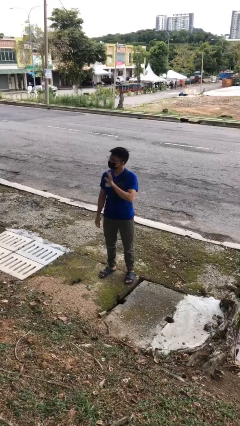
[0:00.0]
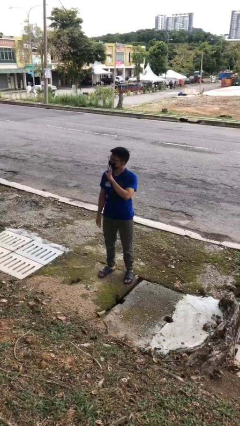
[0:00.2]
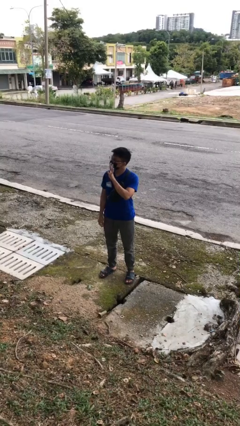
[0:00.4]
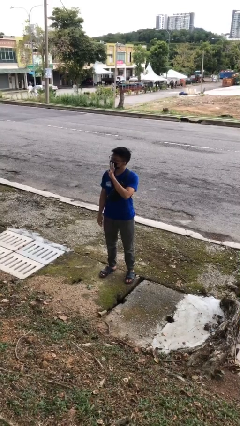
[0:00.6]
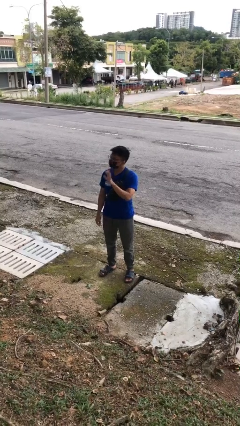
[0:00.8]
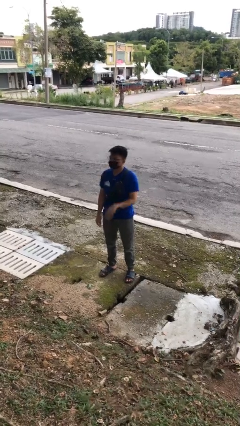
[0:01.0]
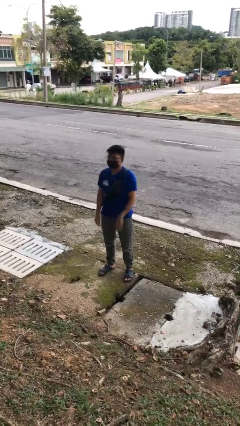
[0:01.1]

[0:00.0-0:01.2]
person gestures number five

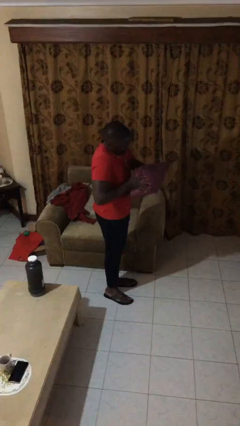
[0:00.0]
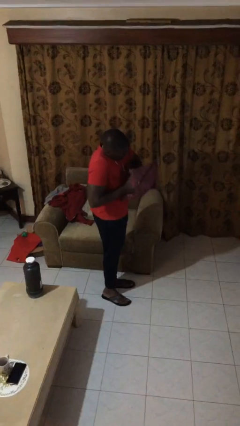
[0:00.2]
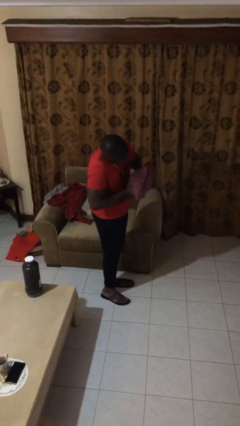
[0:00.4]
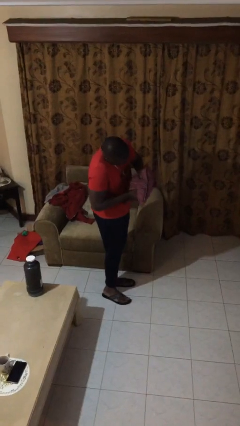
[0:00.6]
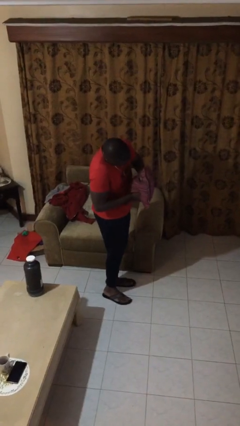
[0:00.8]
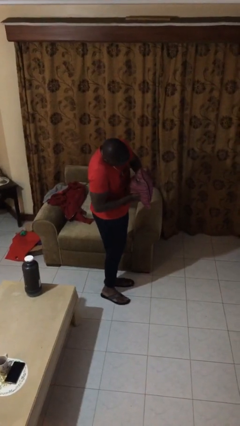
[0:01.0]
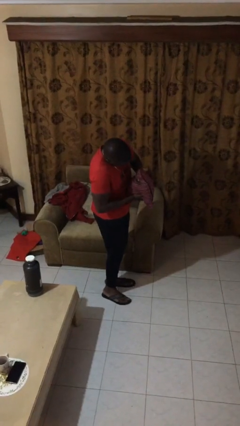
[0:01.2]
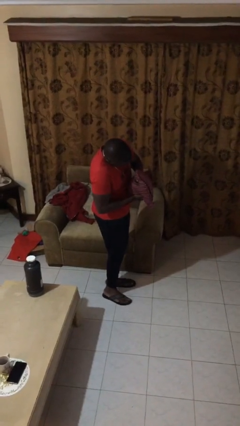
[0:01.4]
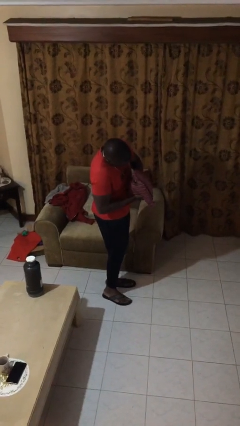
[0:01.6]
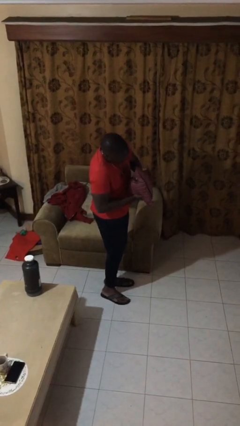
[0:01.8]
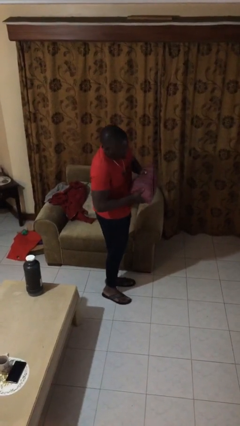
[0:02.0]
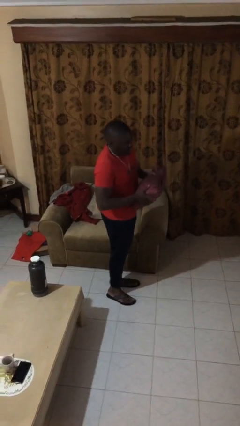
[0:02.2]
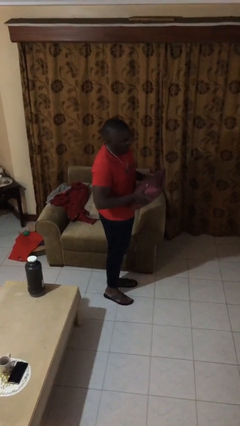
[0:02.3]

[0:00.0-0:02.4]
person squeezes object

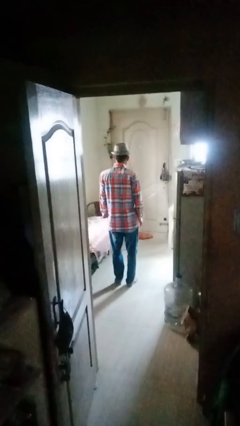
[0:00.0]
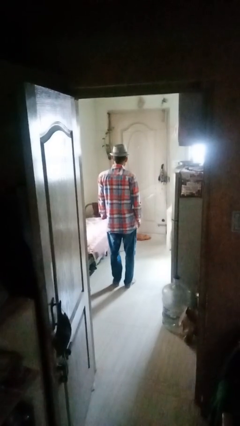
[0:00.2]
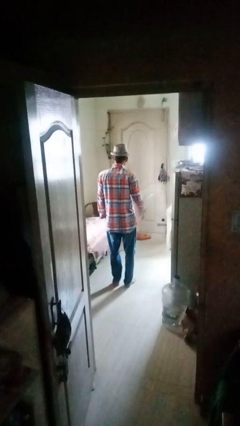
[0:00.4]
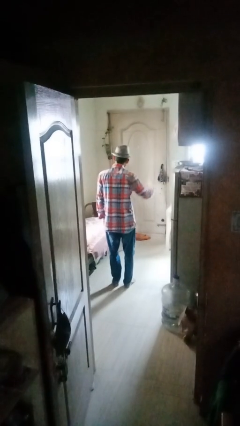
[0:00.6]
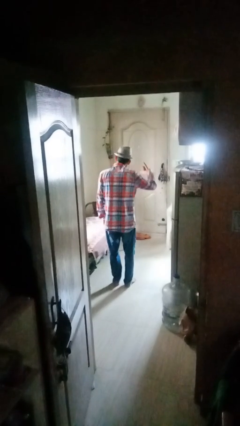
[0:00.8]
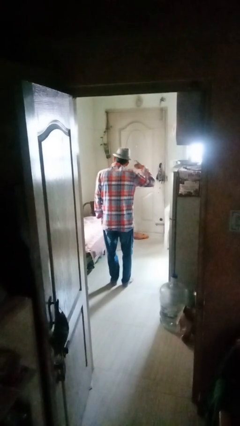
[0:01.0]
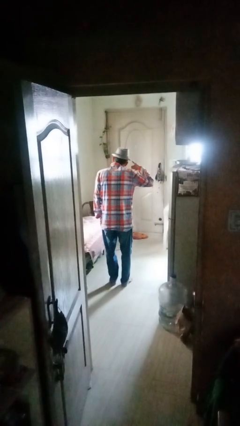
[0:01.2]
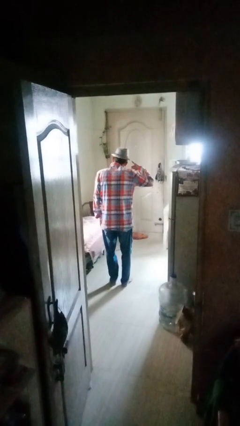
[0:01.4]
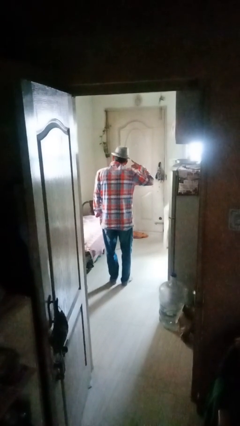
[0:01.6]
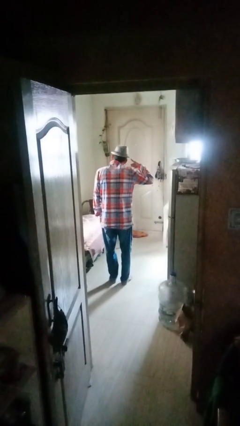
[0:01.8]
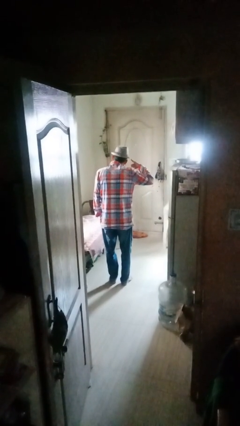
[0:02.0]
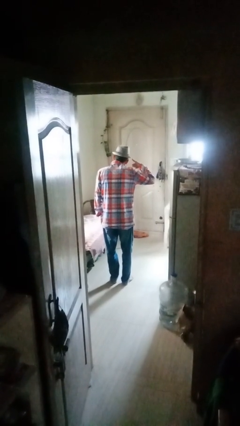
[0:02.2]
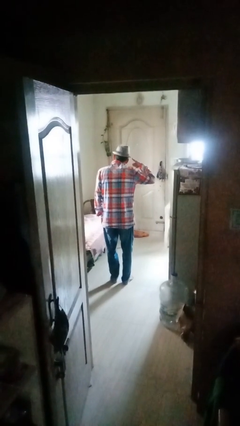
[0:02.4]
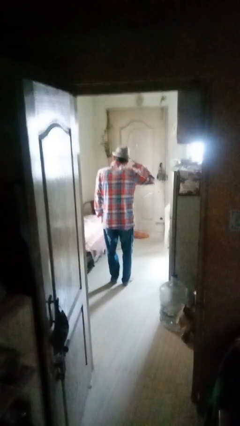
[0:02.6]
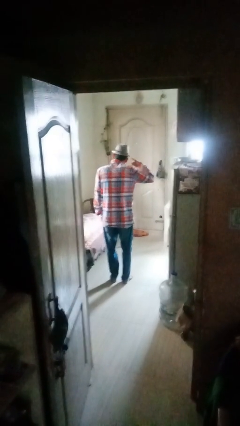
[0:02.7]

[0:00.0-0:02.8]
person gestures call me

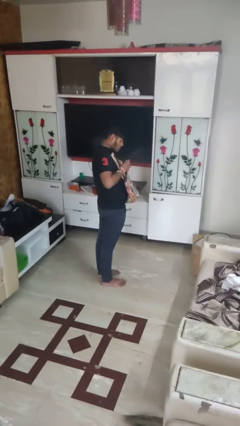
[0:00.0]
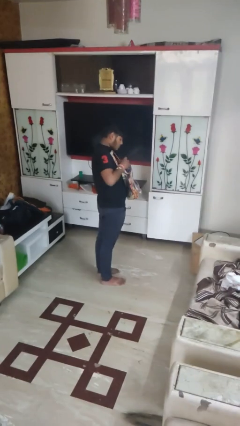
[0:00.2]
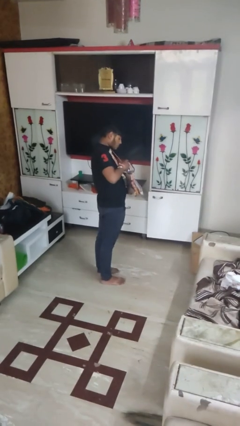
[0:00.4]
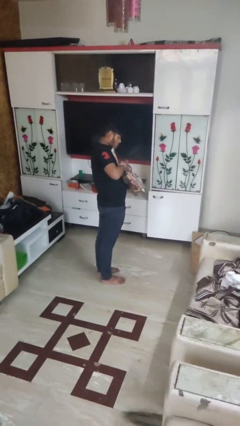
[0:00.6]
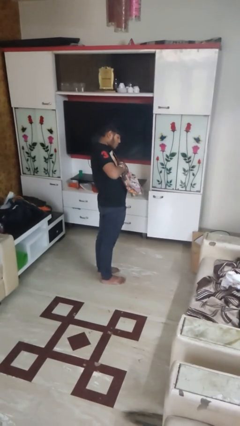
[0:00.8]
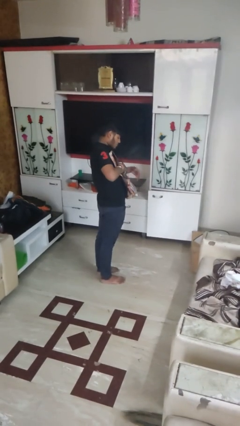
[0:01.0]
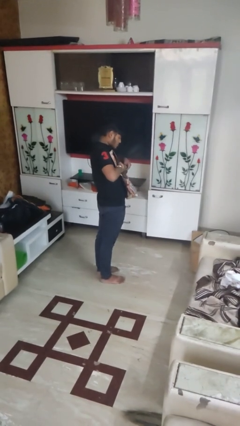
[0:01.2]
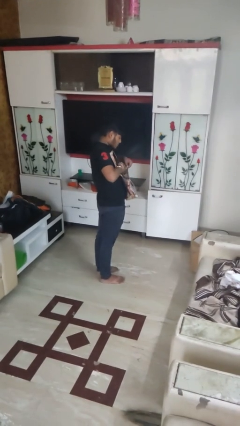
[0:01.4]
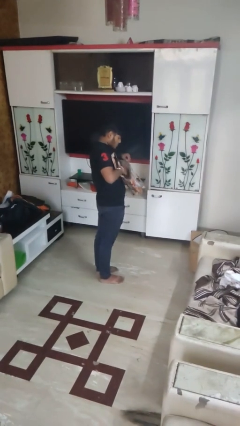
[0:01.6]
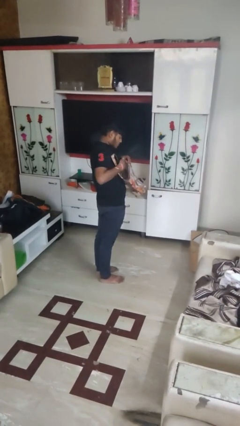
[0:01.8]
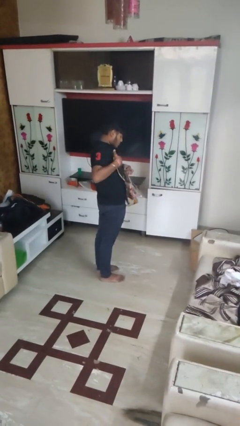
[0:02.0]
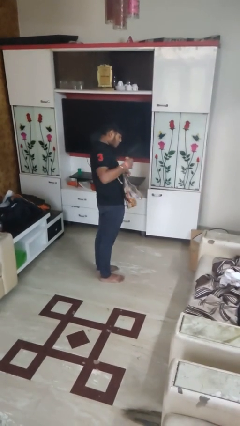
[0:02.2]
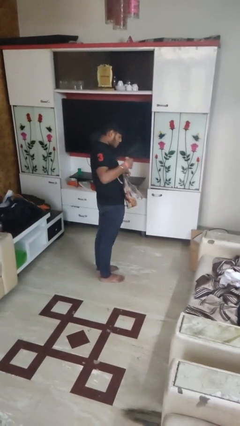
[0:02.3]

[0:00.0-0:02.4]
person puts object into purse

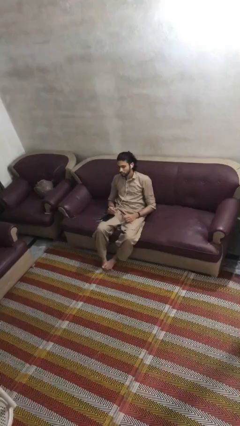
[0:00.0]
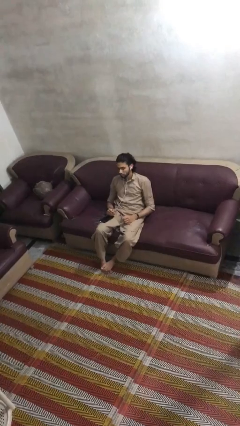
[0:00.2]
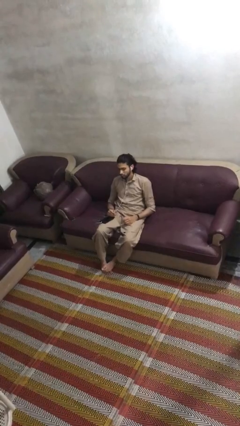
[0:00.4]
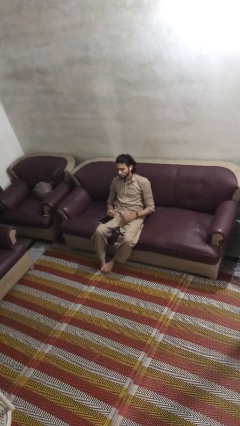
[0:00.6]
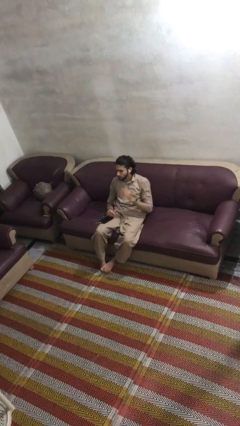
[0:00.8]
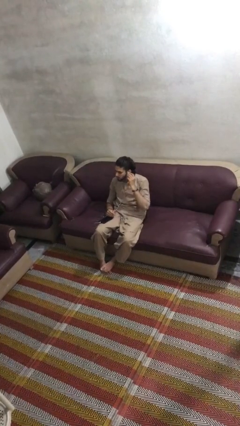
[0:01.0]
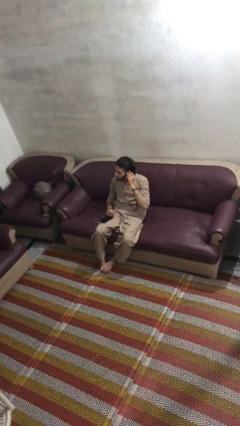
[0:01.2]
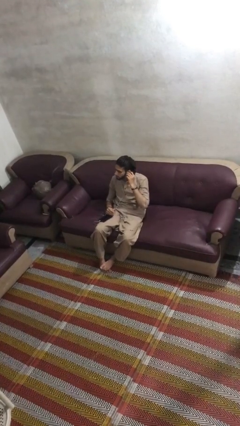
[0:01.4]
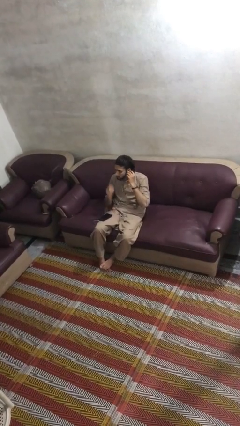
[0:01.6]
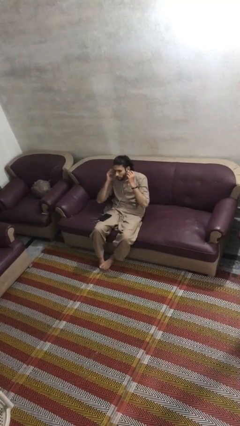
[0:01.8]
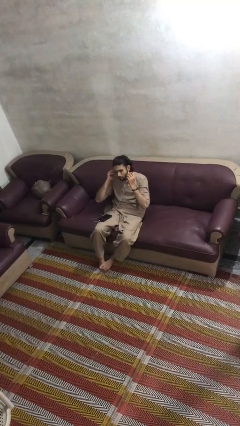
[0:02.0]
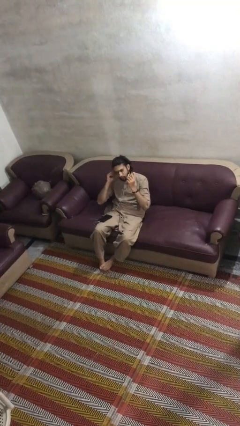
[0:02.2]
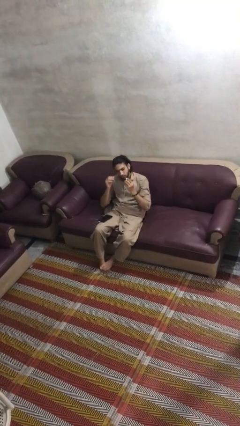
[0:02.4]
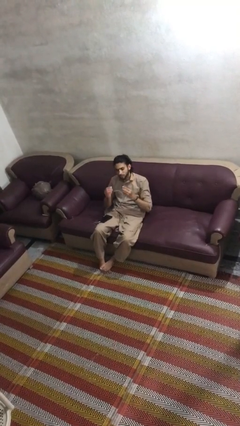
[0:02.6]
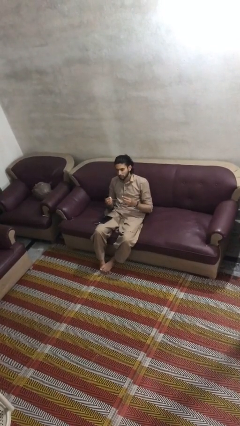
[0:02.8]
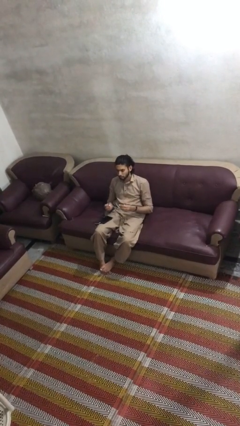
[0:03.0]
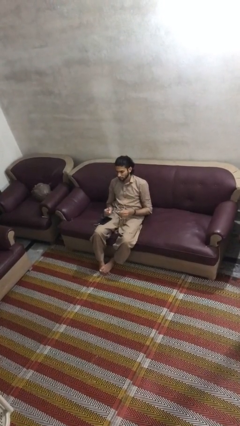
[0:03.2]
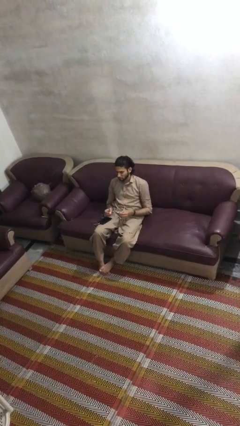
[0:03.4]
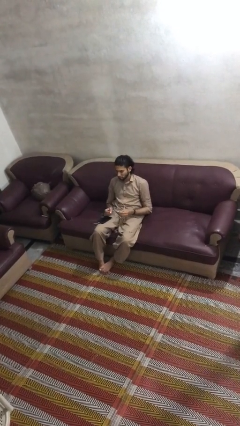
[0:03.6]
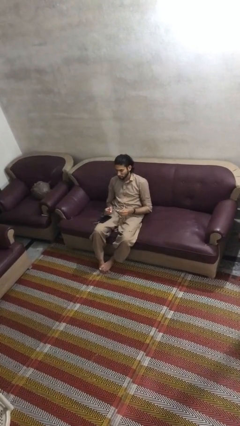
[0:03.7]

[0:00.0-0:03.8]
person takes off headphones

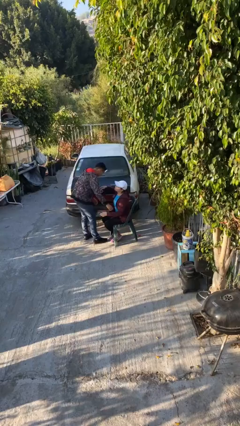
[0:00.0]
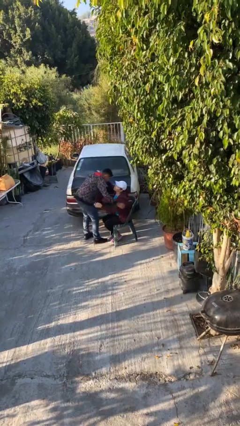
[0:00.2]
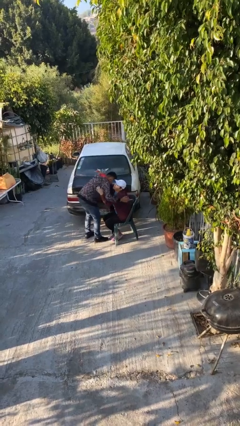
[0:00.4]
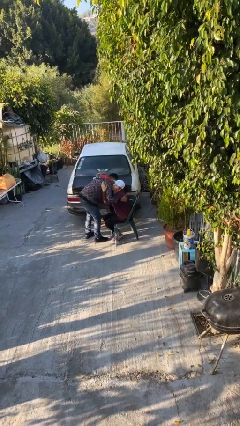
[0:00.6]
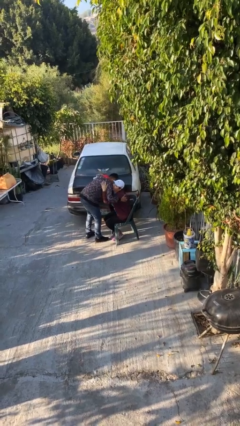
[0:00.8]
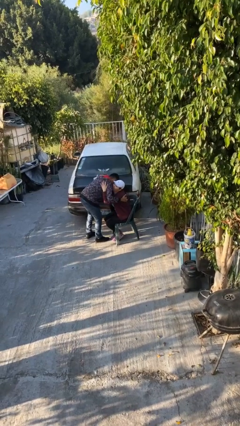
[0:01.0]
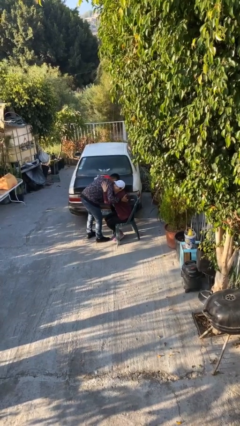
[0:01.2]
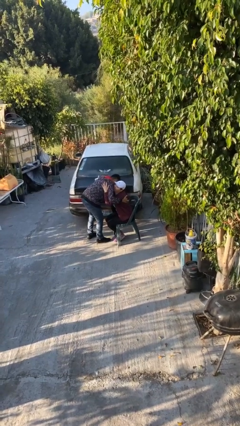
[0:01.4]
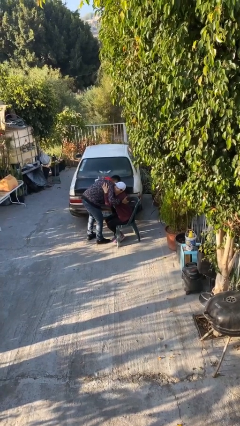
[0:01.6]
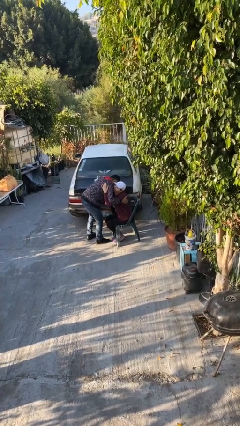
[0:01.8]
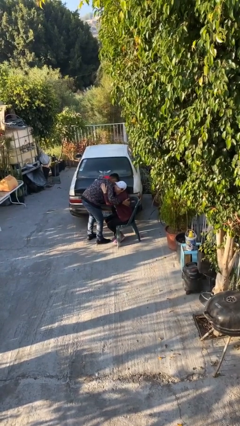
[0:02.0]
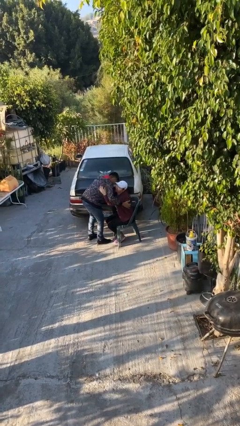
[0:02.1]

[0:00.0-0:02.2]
person embraces person

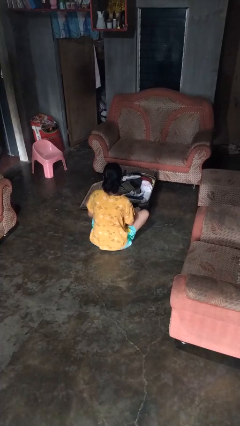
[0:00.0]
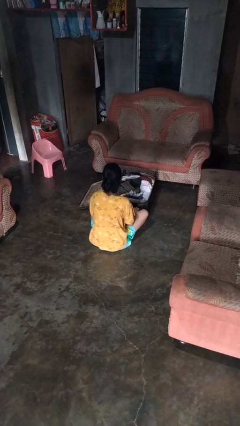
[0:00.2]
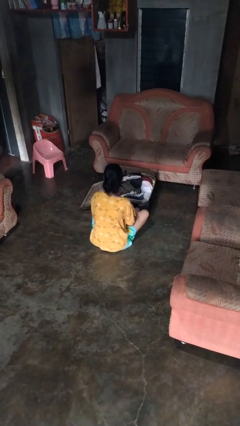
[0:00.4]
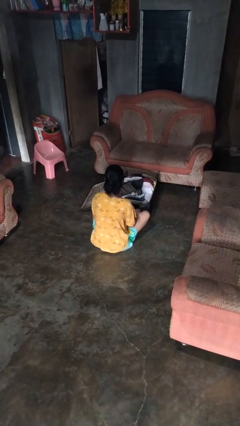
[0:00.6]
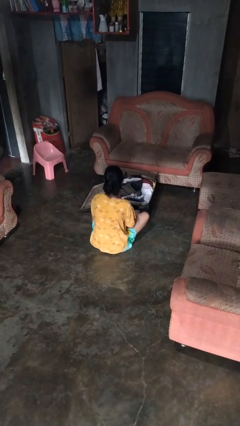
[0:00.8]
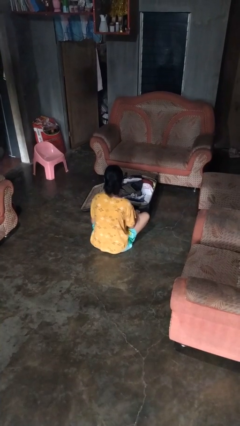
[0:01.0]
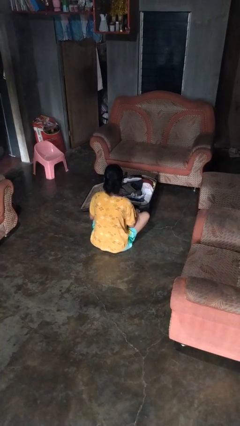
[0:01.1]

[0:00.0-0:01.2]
person closes suitcase

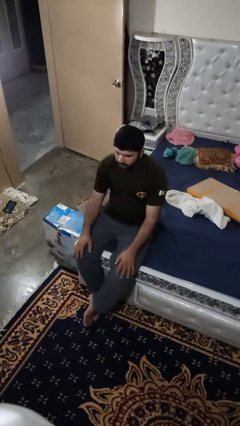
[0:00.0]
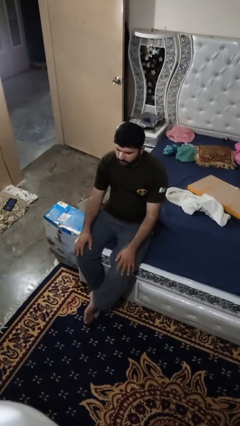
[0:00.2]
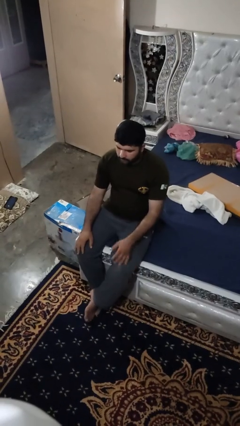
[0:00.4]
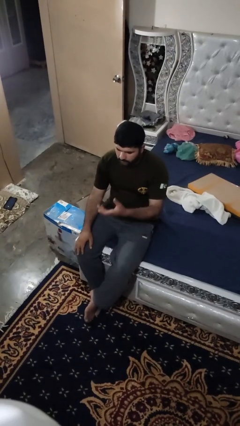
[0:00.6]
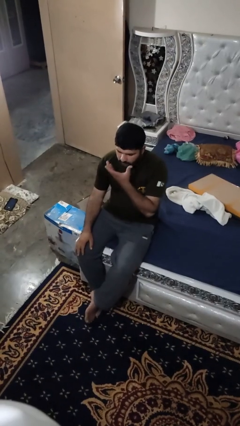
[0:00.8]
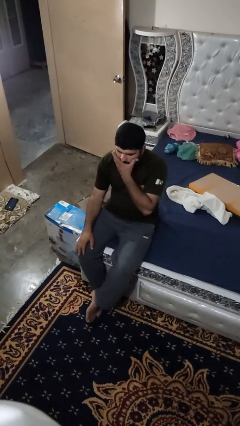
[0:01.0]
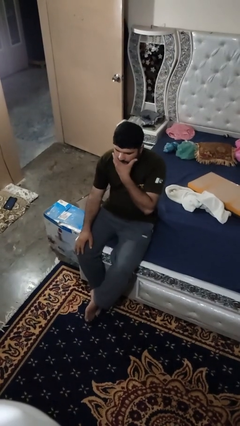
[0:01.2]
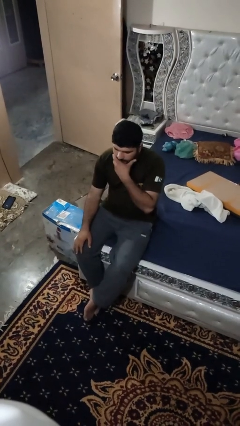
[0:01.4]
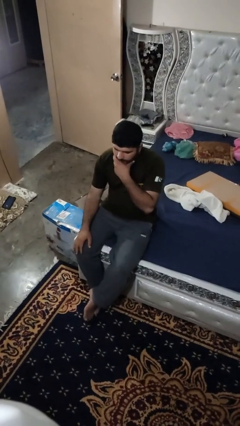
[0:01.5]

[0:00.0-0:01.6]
person strokes chin
